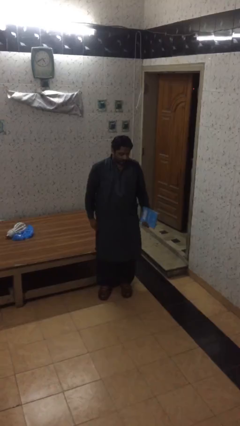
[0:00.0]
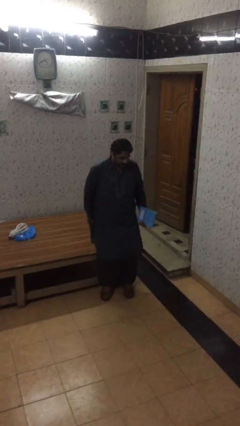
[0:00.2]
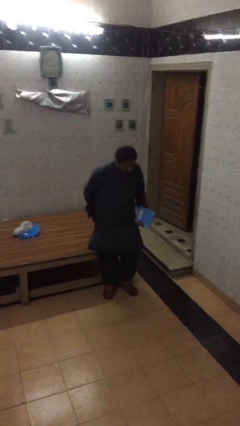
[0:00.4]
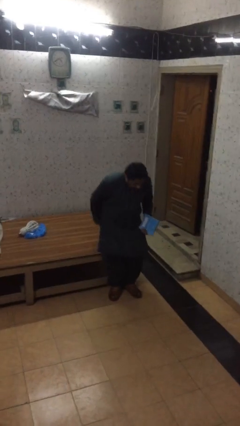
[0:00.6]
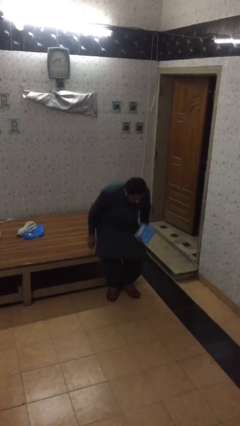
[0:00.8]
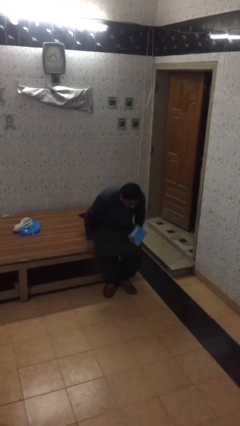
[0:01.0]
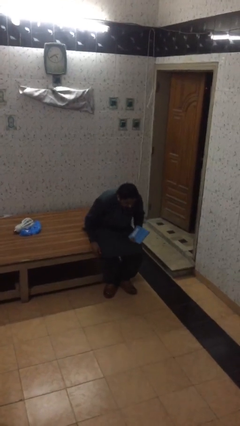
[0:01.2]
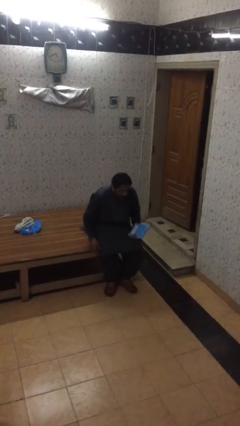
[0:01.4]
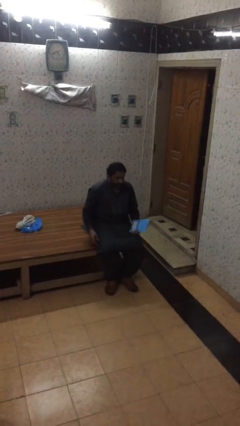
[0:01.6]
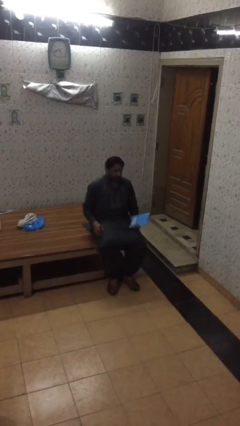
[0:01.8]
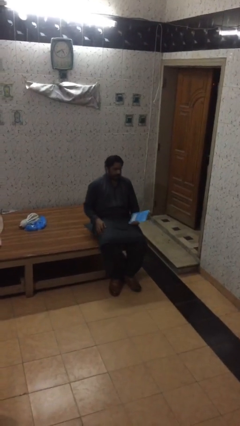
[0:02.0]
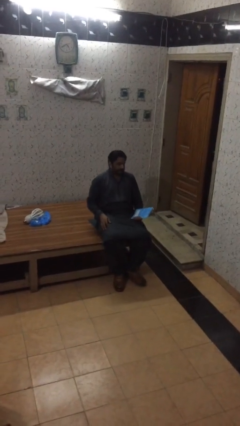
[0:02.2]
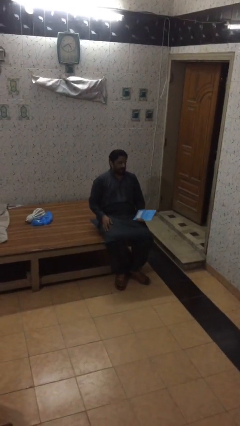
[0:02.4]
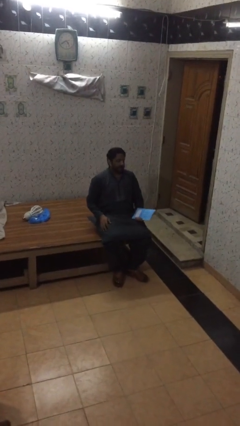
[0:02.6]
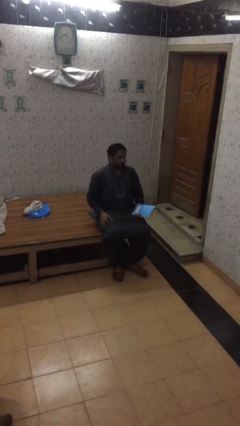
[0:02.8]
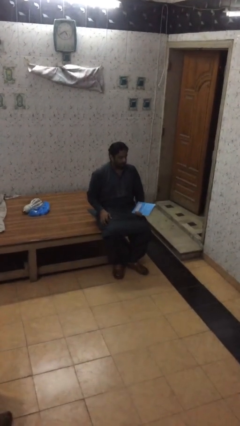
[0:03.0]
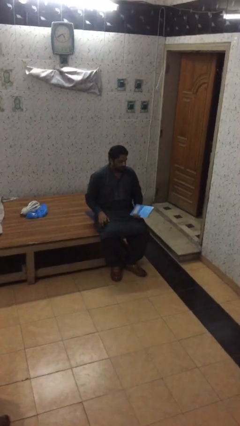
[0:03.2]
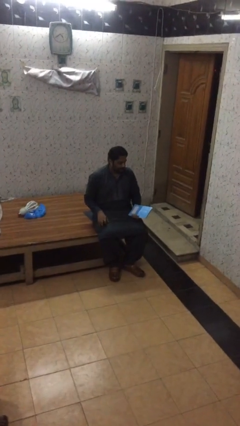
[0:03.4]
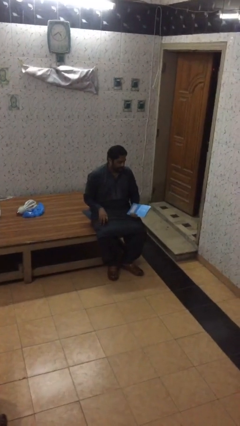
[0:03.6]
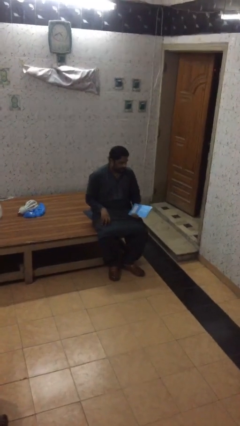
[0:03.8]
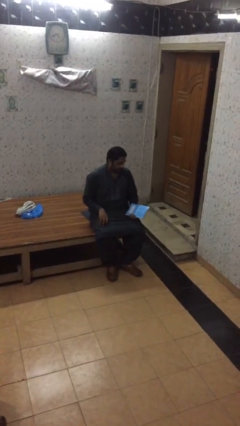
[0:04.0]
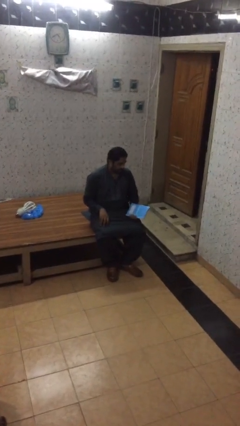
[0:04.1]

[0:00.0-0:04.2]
person sits down

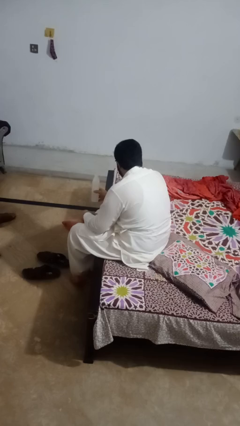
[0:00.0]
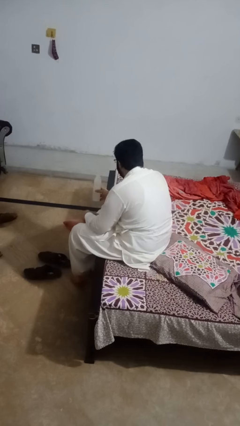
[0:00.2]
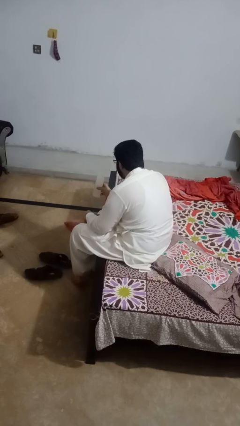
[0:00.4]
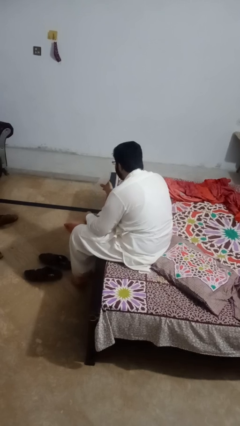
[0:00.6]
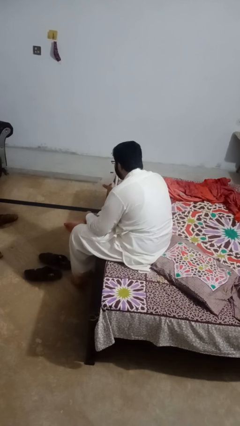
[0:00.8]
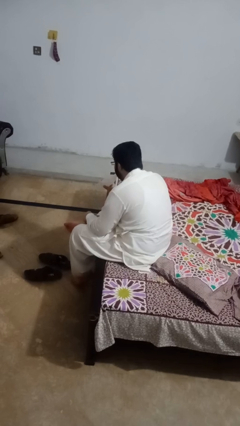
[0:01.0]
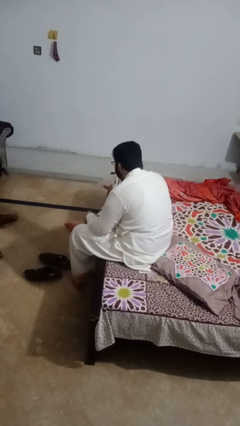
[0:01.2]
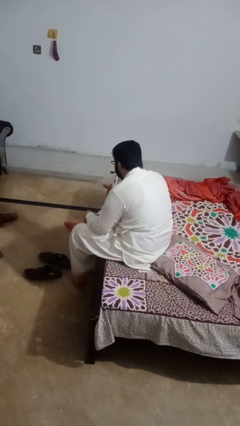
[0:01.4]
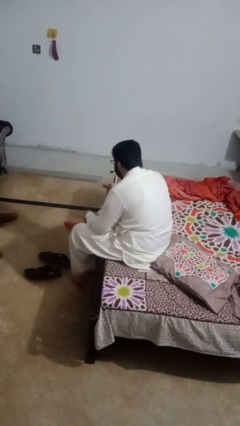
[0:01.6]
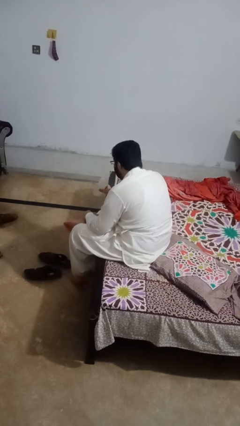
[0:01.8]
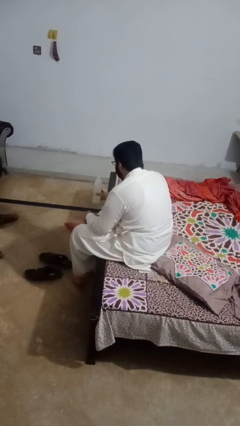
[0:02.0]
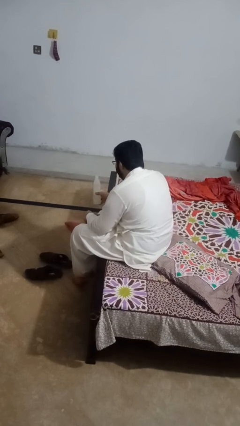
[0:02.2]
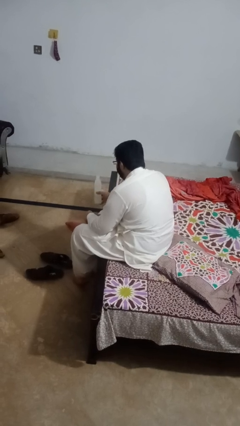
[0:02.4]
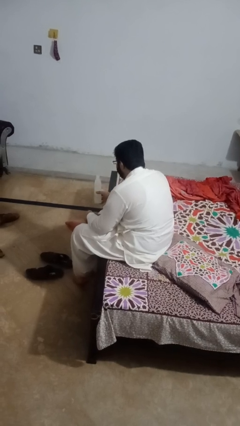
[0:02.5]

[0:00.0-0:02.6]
person drinks from straw

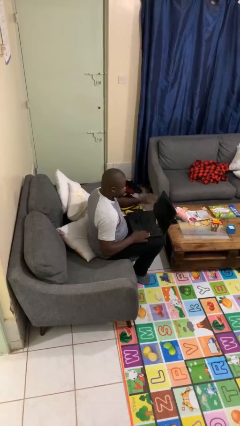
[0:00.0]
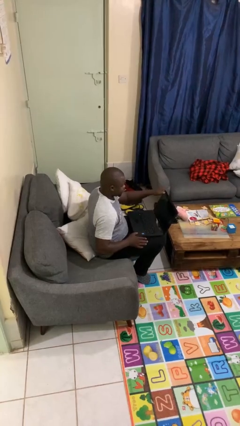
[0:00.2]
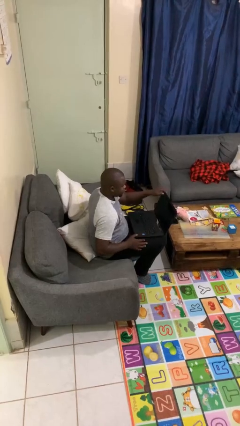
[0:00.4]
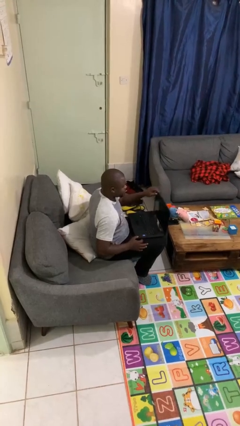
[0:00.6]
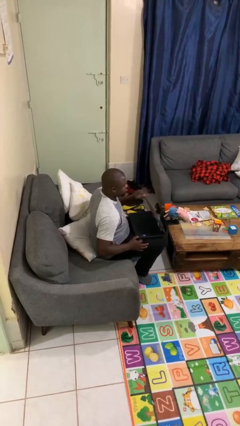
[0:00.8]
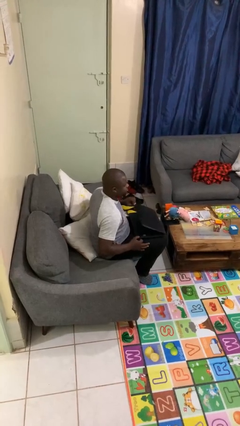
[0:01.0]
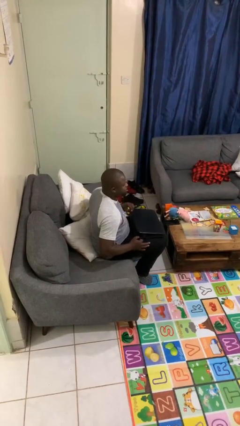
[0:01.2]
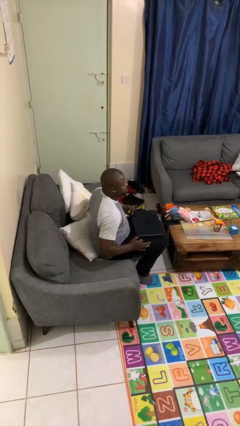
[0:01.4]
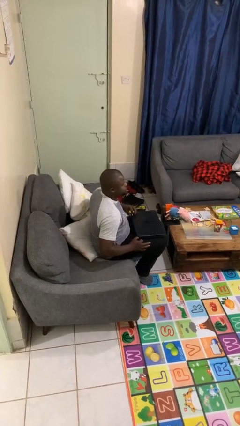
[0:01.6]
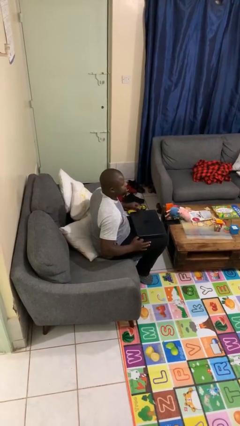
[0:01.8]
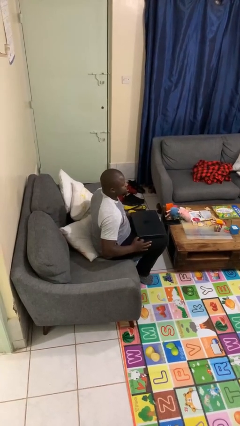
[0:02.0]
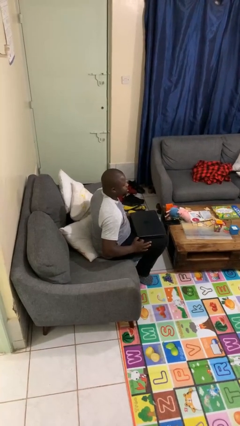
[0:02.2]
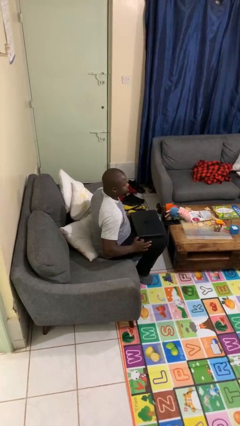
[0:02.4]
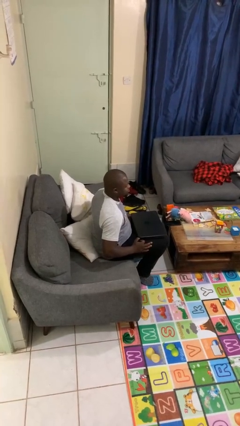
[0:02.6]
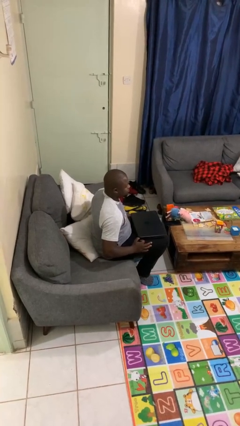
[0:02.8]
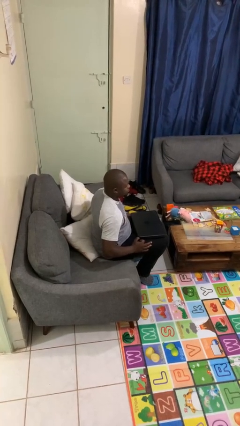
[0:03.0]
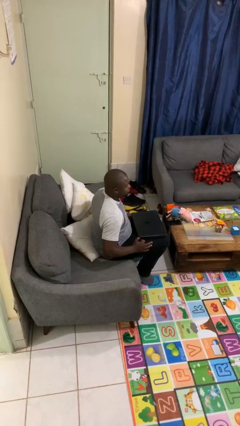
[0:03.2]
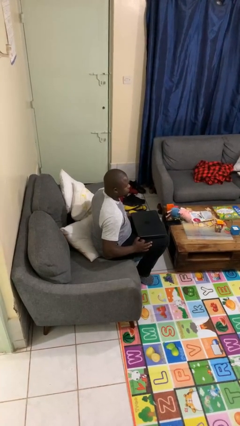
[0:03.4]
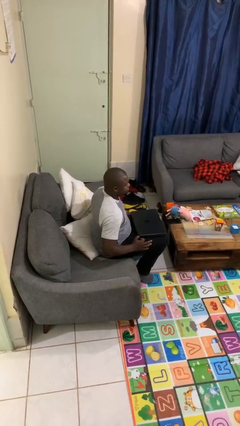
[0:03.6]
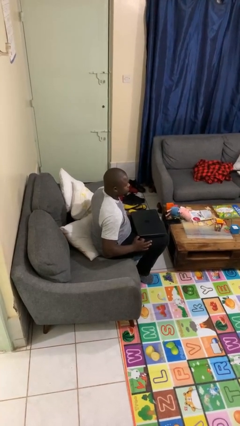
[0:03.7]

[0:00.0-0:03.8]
person closes laptop

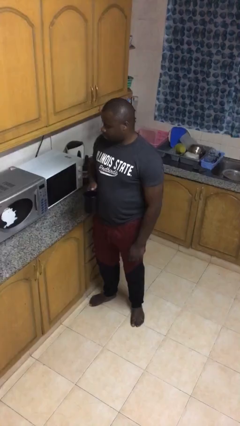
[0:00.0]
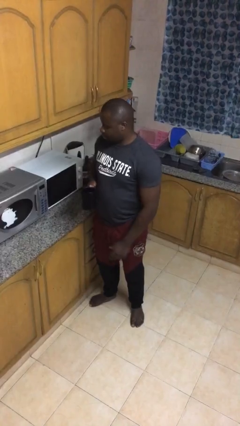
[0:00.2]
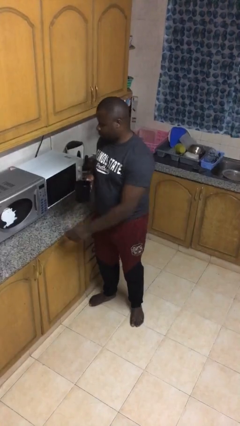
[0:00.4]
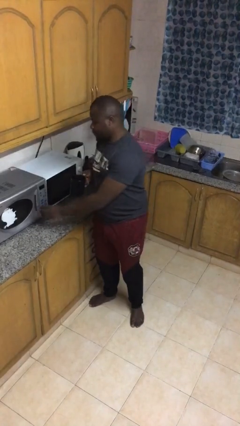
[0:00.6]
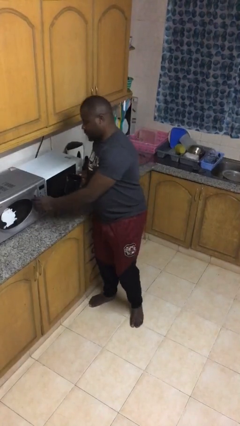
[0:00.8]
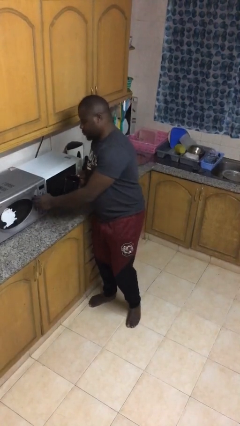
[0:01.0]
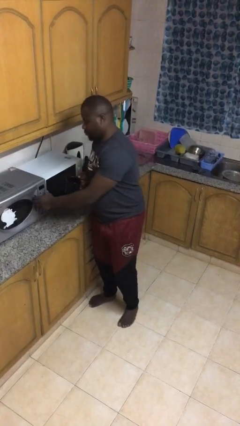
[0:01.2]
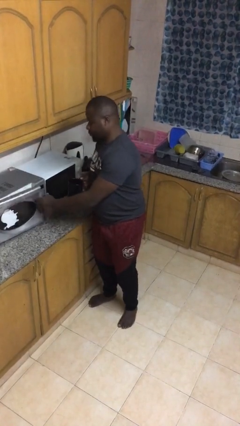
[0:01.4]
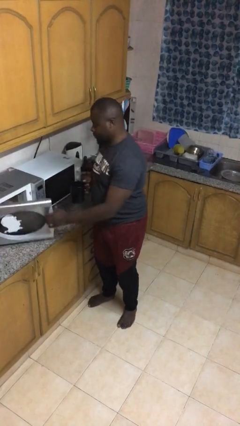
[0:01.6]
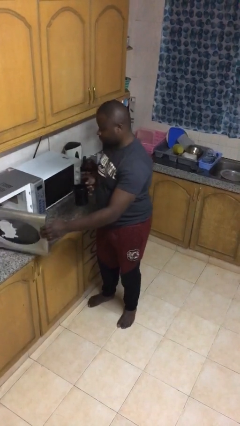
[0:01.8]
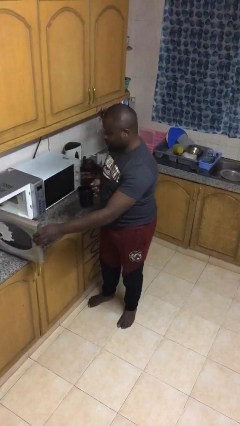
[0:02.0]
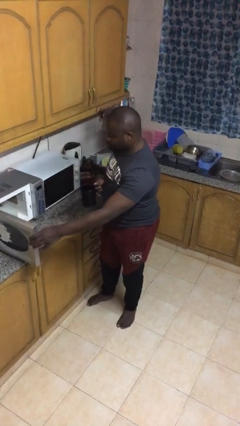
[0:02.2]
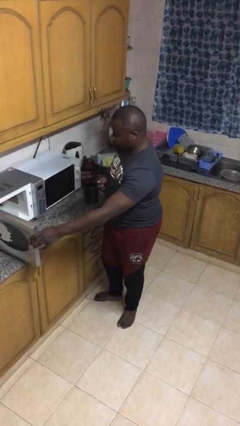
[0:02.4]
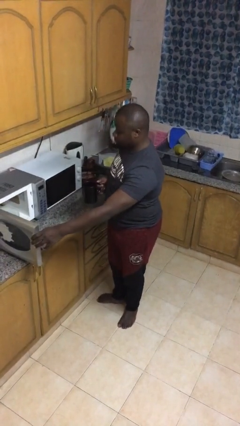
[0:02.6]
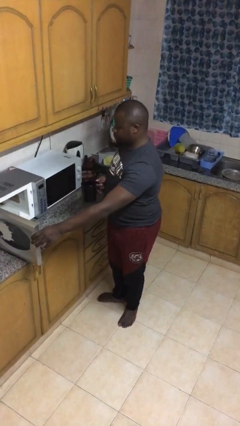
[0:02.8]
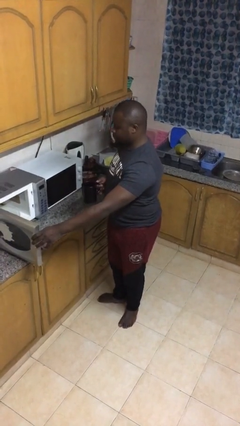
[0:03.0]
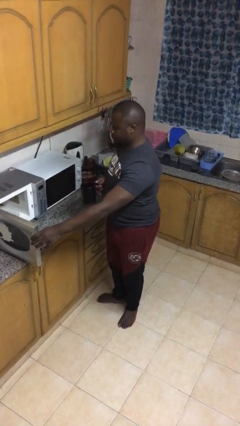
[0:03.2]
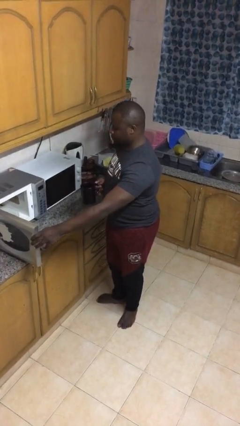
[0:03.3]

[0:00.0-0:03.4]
person opens microwave

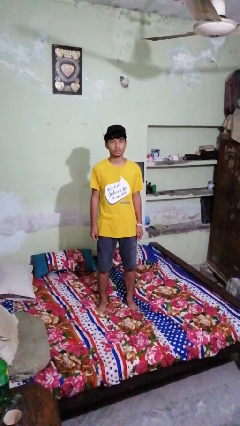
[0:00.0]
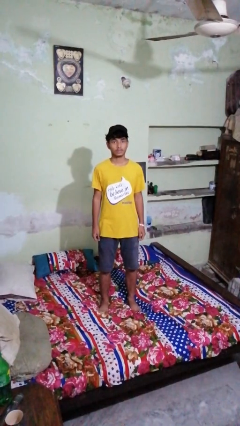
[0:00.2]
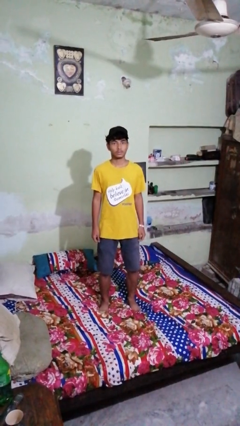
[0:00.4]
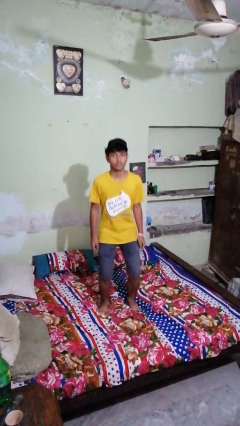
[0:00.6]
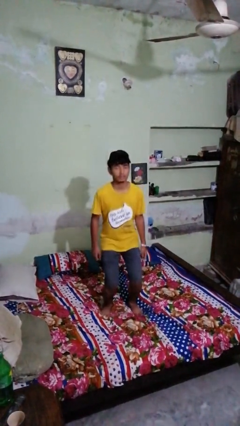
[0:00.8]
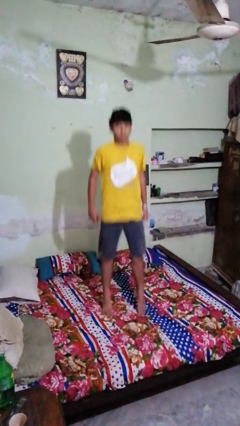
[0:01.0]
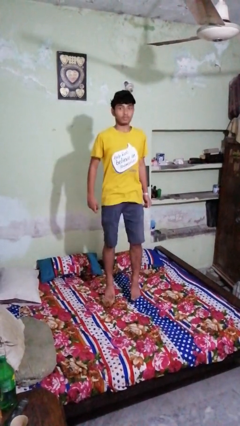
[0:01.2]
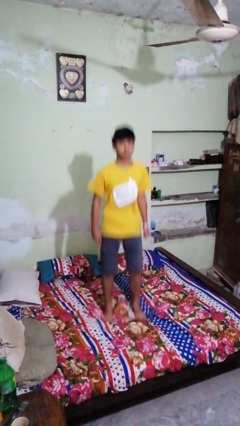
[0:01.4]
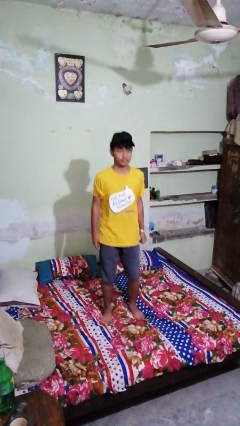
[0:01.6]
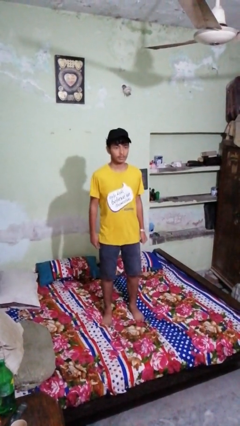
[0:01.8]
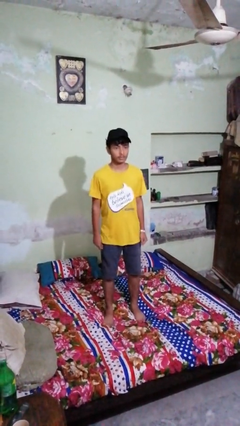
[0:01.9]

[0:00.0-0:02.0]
person jumps on bed

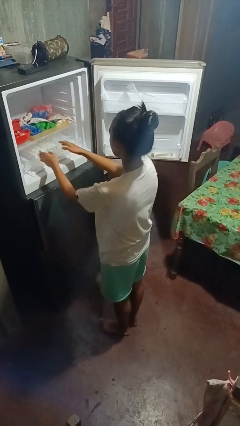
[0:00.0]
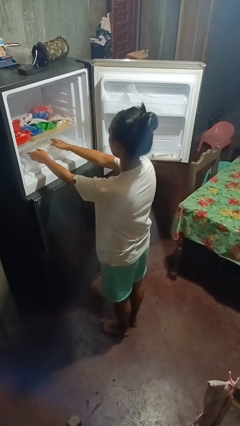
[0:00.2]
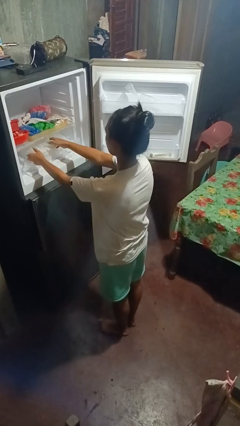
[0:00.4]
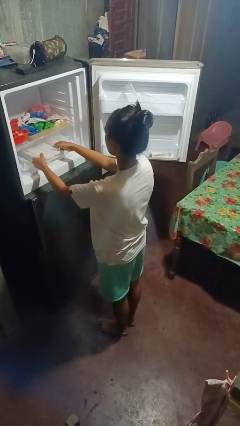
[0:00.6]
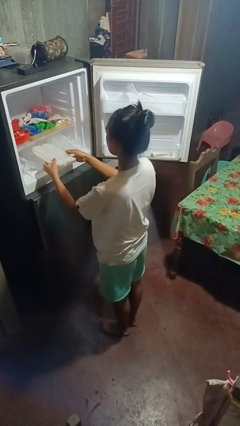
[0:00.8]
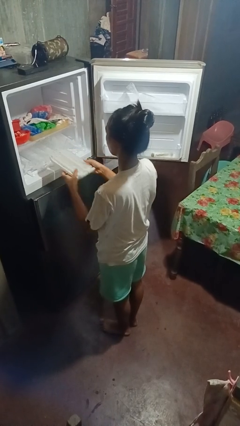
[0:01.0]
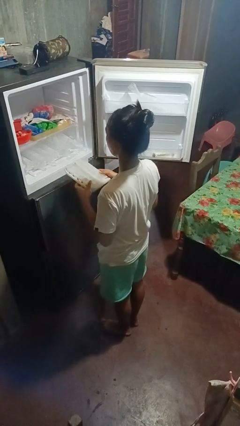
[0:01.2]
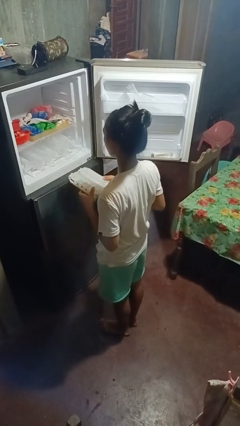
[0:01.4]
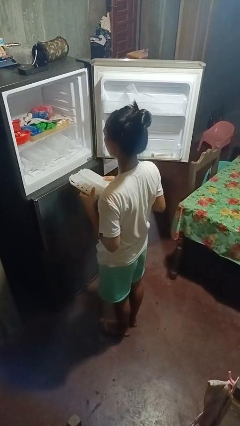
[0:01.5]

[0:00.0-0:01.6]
person takes object from refrigerator
